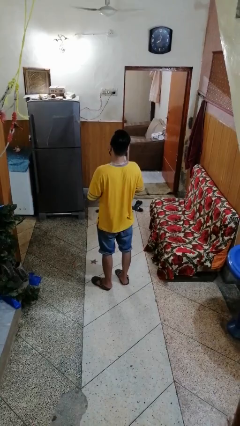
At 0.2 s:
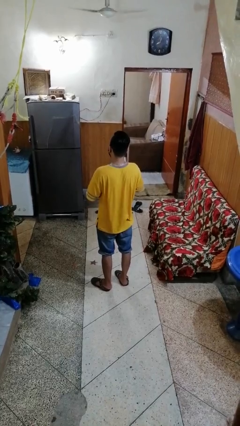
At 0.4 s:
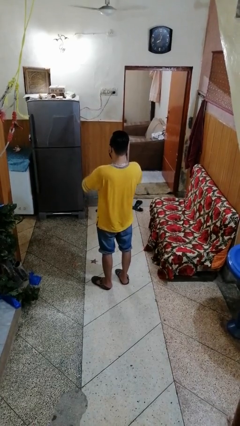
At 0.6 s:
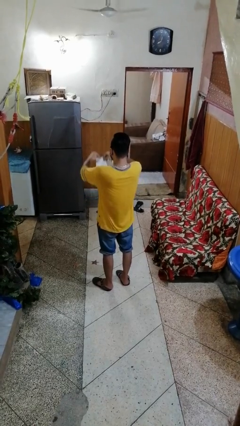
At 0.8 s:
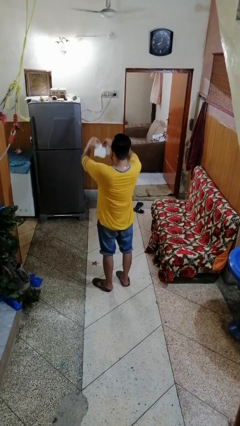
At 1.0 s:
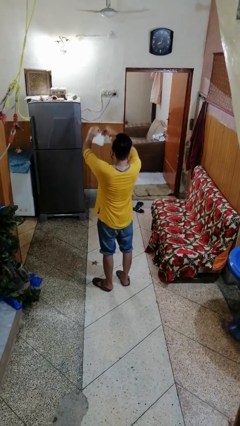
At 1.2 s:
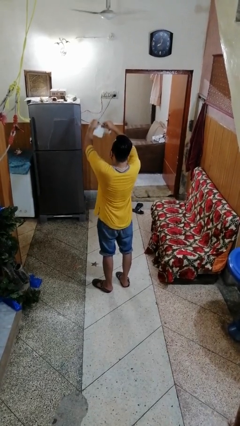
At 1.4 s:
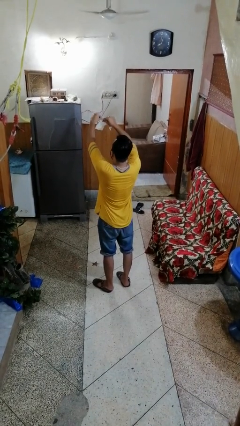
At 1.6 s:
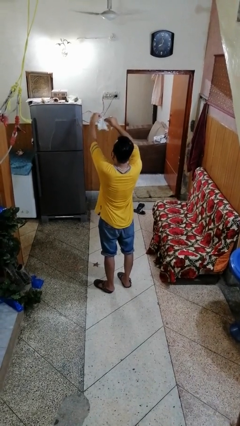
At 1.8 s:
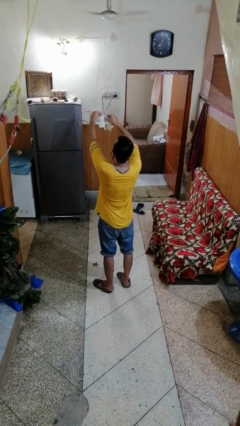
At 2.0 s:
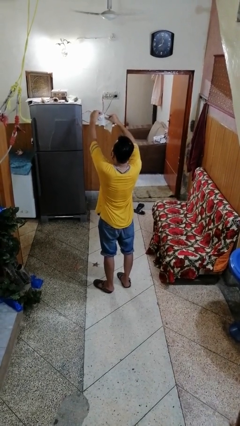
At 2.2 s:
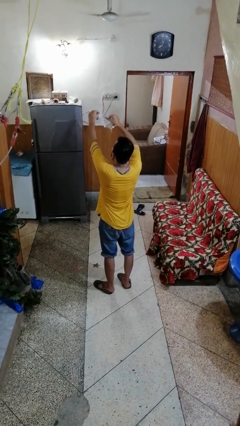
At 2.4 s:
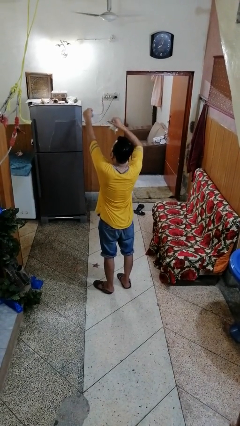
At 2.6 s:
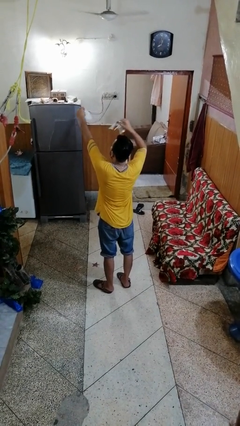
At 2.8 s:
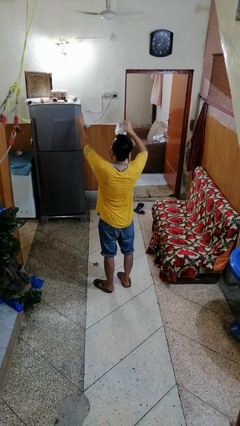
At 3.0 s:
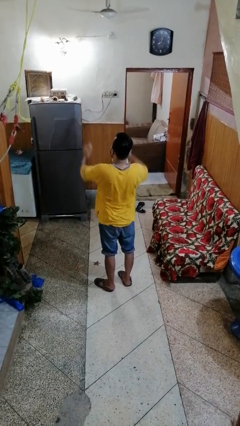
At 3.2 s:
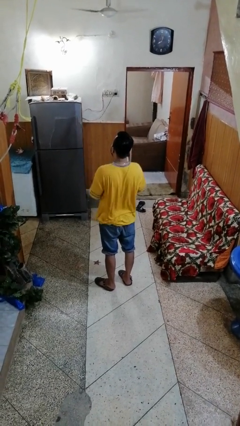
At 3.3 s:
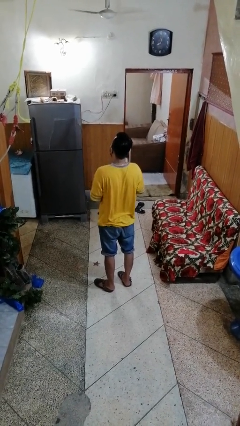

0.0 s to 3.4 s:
person tears paper

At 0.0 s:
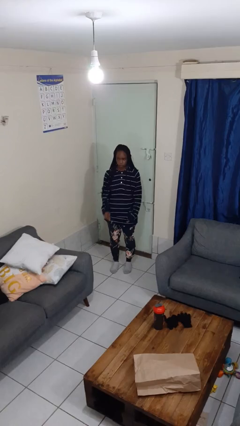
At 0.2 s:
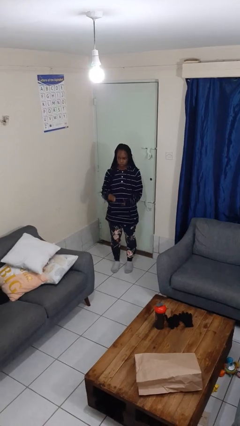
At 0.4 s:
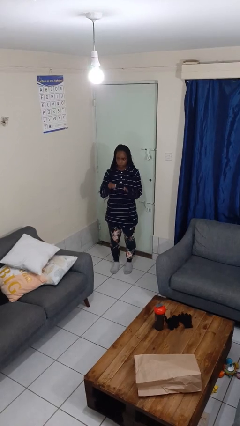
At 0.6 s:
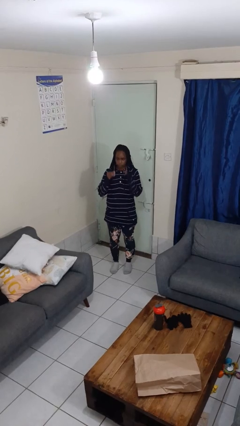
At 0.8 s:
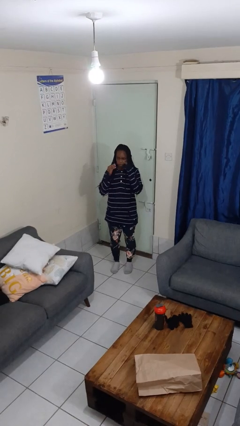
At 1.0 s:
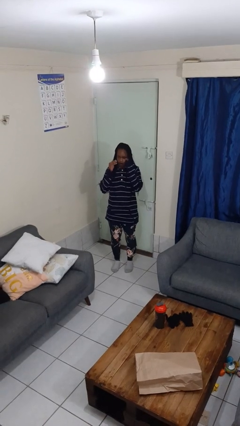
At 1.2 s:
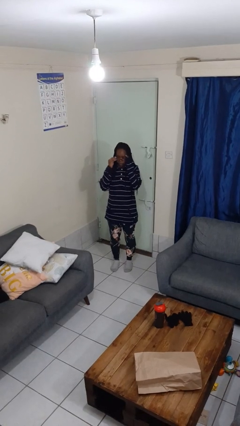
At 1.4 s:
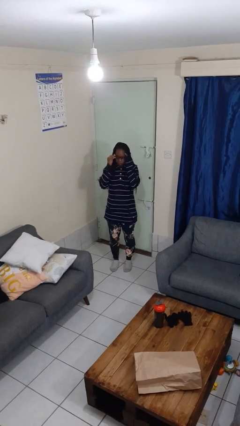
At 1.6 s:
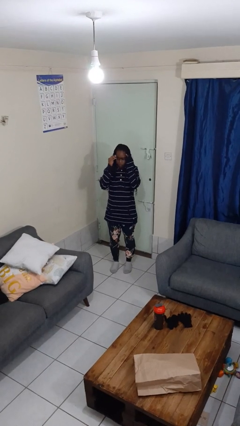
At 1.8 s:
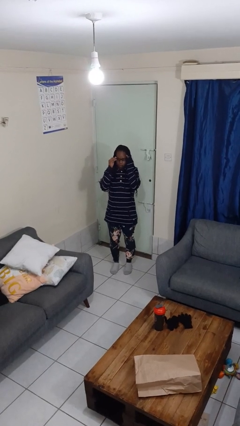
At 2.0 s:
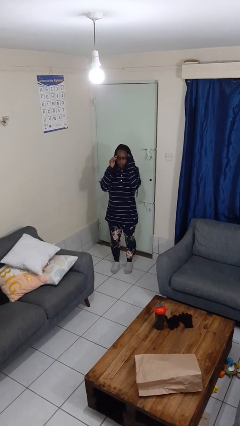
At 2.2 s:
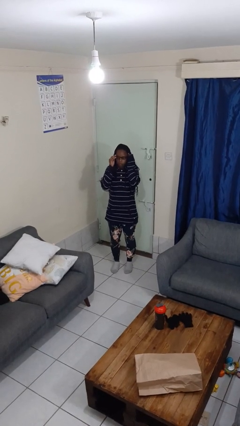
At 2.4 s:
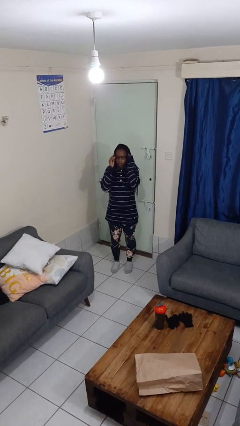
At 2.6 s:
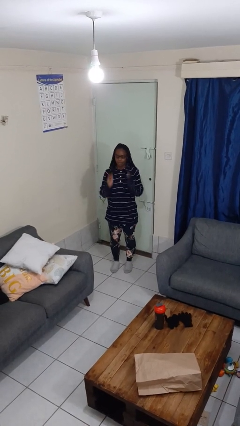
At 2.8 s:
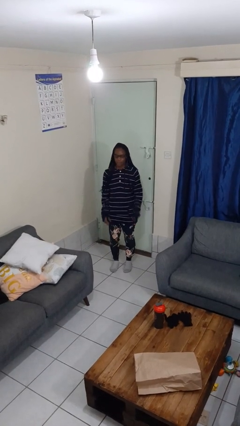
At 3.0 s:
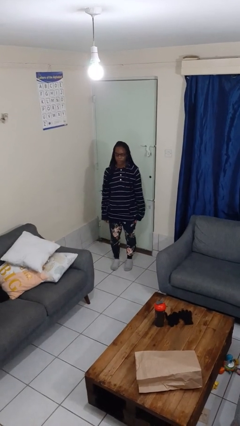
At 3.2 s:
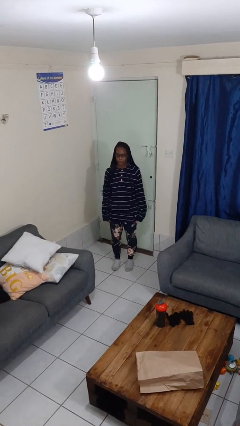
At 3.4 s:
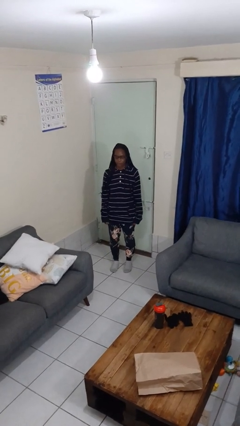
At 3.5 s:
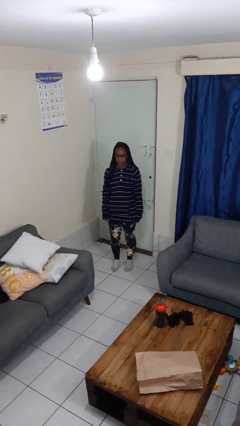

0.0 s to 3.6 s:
person puts on glasses

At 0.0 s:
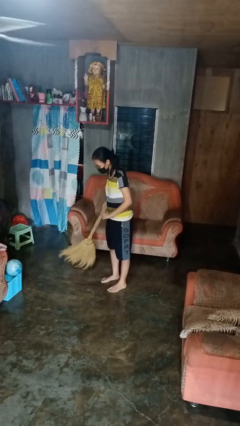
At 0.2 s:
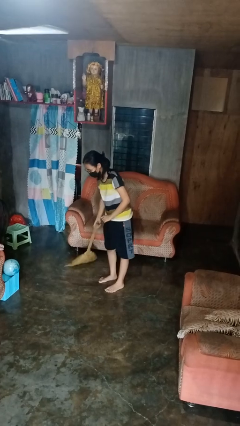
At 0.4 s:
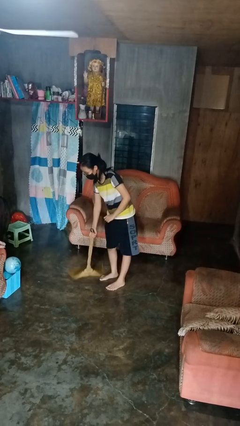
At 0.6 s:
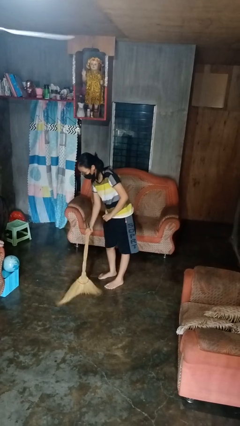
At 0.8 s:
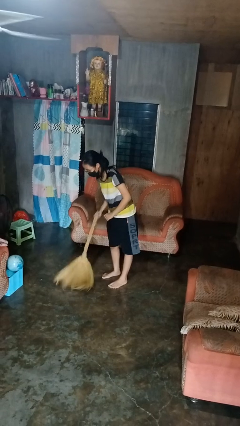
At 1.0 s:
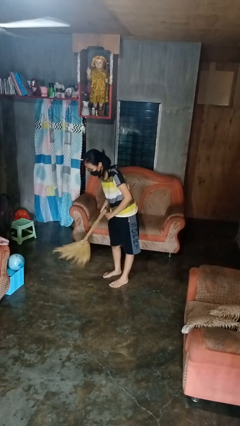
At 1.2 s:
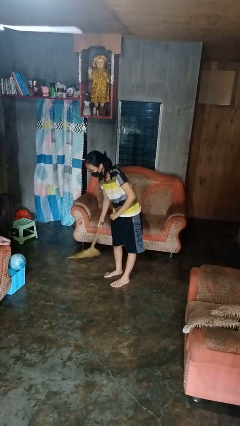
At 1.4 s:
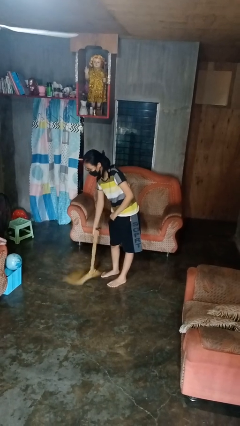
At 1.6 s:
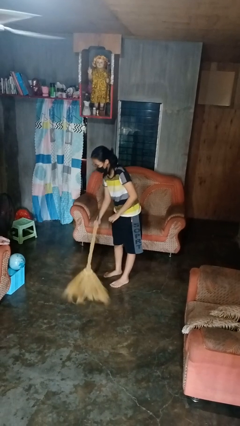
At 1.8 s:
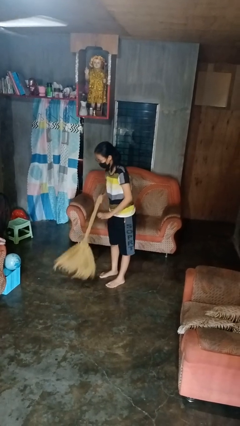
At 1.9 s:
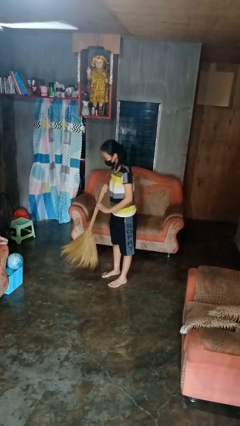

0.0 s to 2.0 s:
person sweeps floor

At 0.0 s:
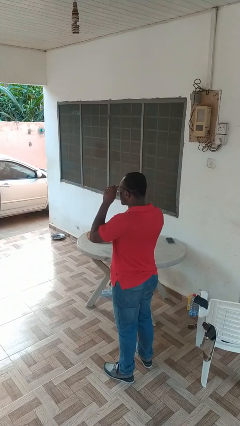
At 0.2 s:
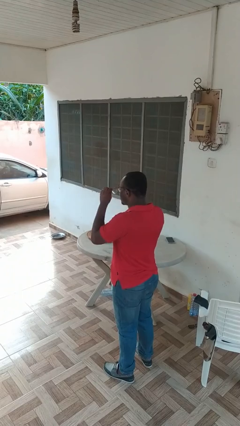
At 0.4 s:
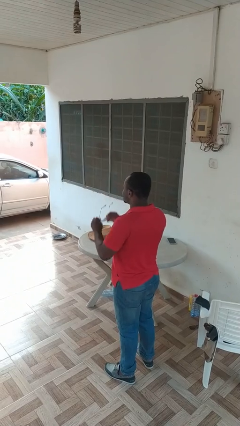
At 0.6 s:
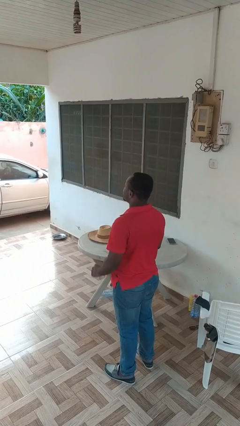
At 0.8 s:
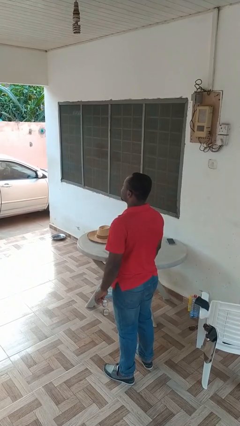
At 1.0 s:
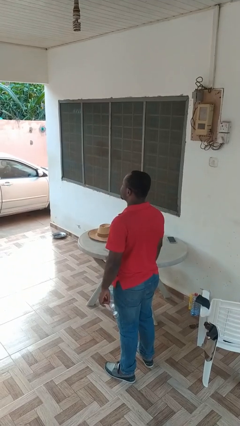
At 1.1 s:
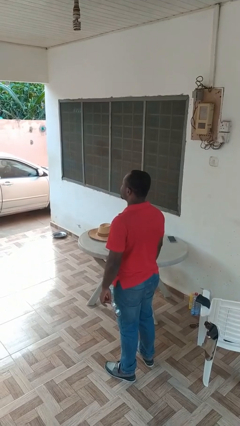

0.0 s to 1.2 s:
person takes off glasses

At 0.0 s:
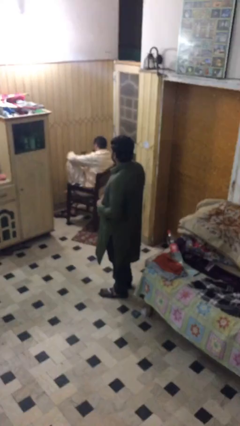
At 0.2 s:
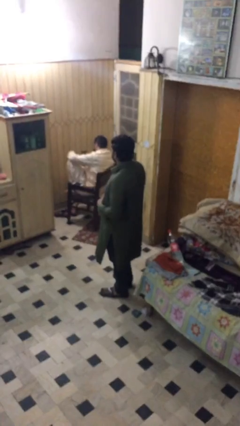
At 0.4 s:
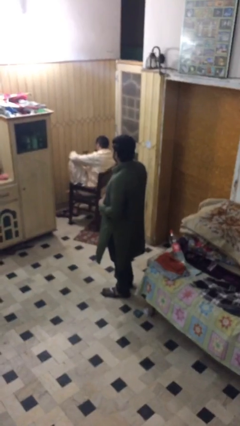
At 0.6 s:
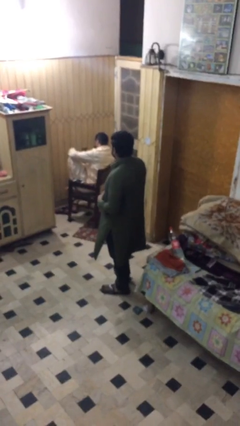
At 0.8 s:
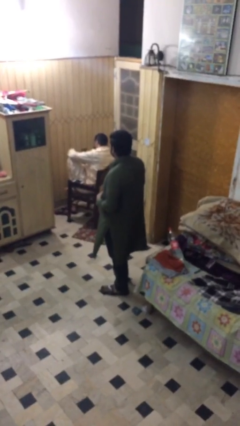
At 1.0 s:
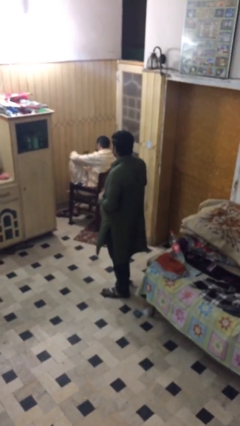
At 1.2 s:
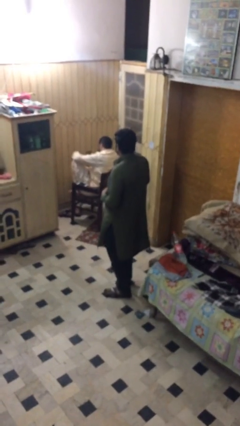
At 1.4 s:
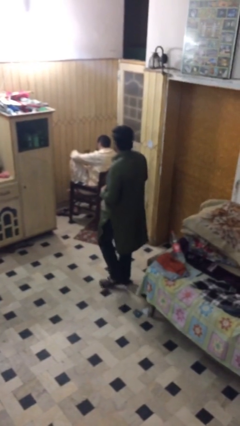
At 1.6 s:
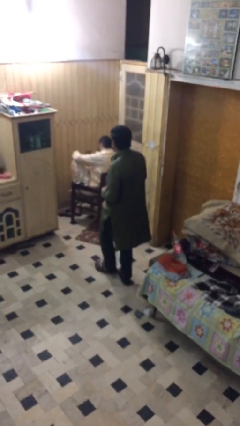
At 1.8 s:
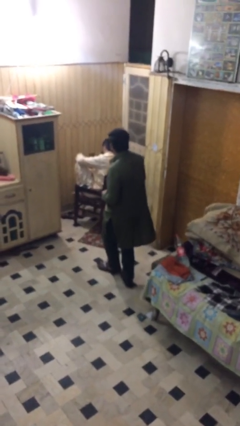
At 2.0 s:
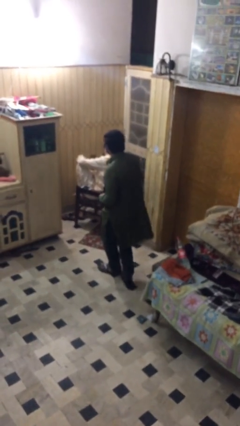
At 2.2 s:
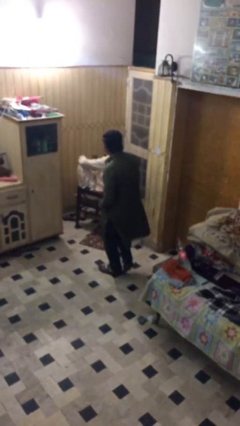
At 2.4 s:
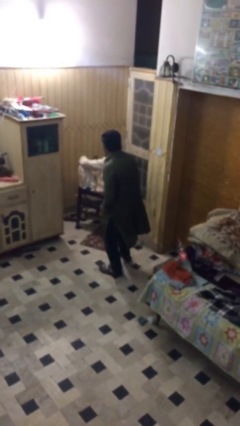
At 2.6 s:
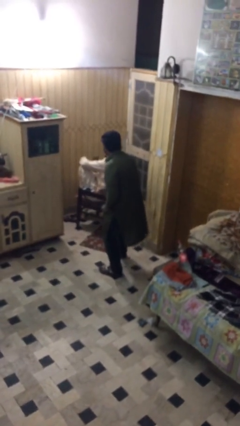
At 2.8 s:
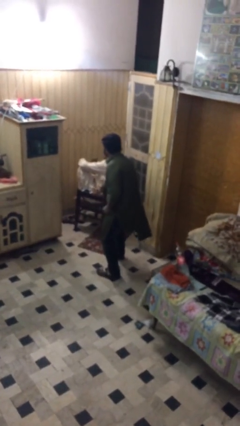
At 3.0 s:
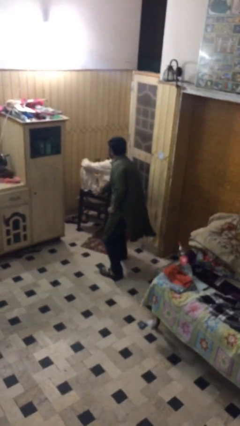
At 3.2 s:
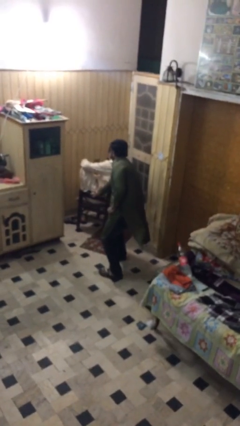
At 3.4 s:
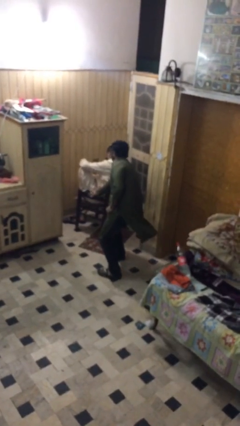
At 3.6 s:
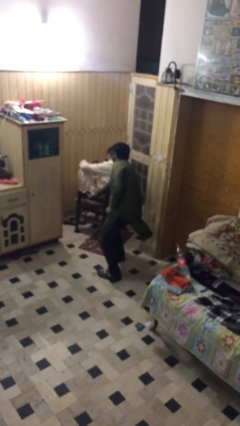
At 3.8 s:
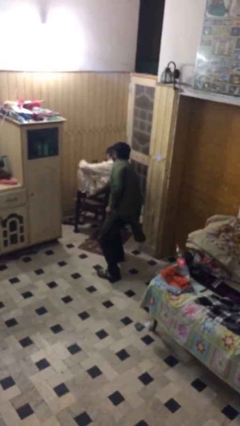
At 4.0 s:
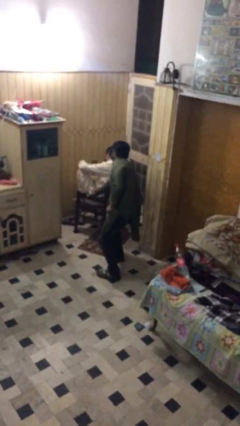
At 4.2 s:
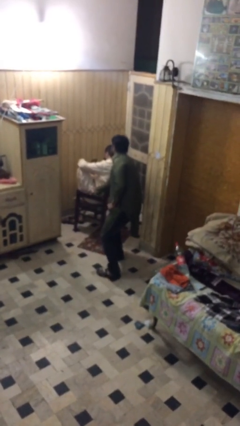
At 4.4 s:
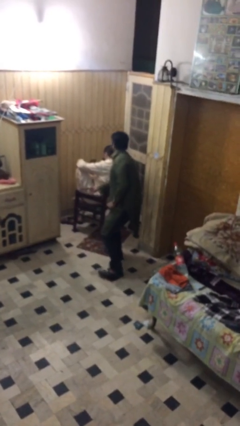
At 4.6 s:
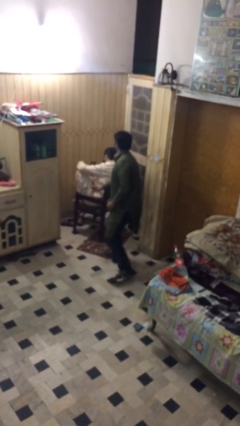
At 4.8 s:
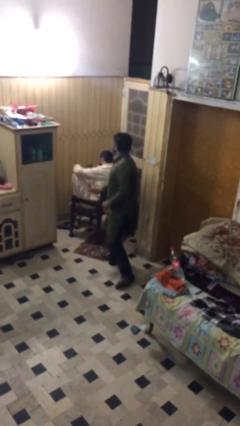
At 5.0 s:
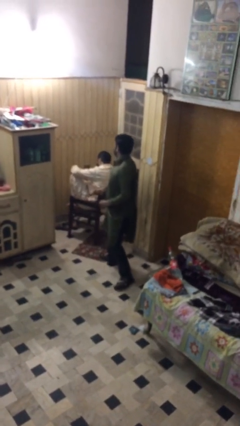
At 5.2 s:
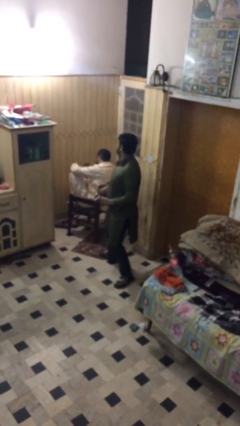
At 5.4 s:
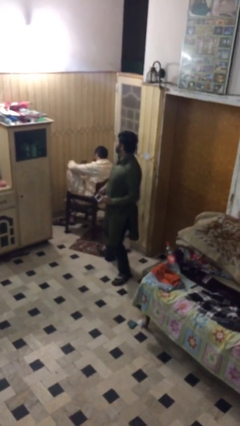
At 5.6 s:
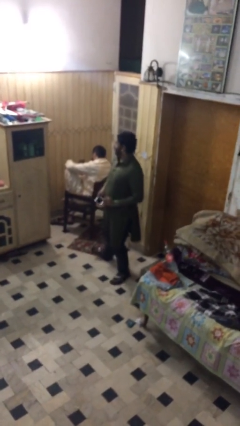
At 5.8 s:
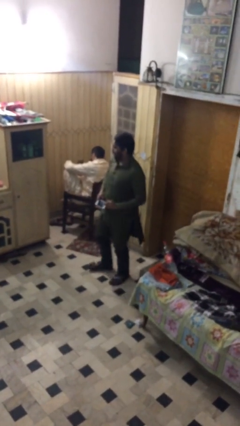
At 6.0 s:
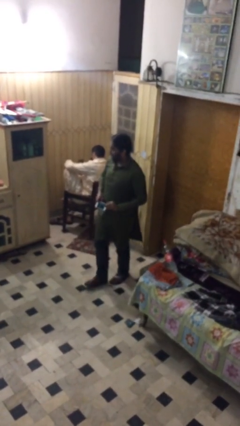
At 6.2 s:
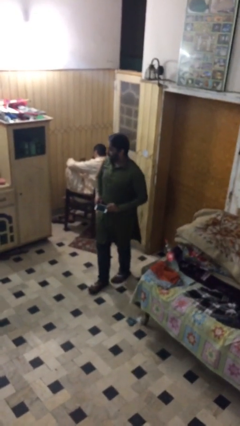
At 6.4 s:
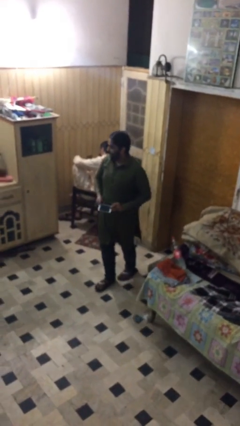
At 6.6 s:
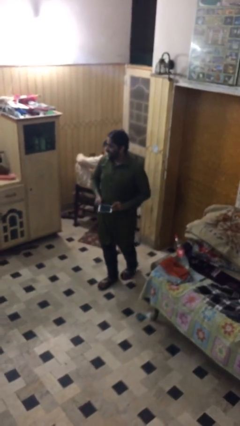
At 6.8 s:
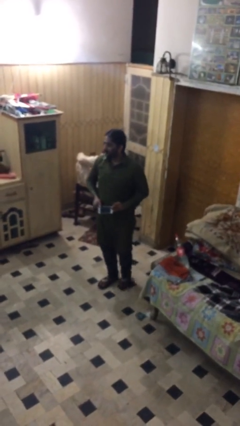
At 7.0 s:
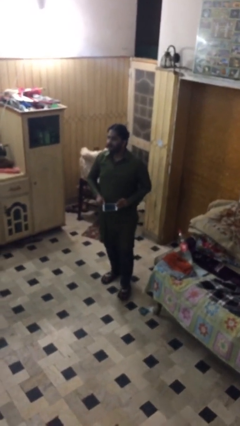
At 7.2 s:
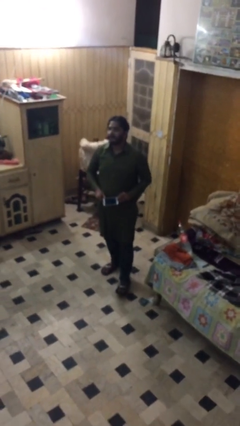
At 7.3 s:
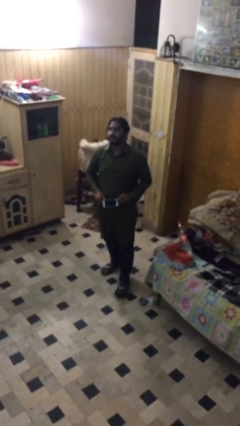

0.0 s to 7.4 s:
person steals object from person

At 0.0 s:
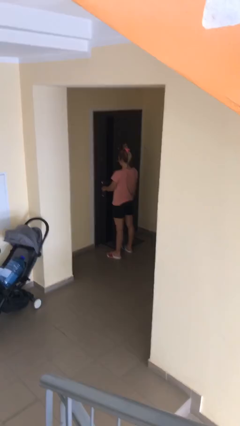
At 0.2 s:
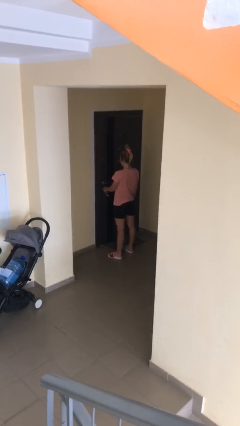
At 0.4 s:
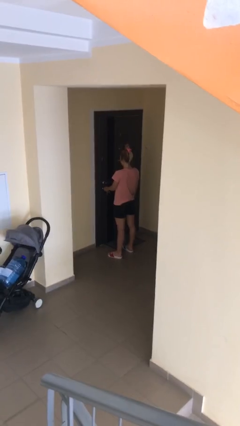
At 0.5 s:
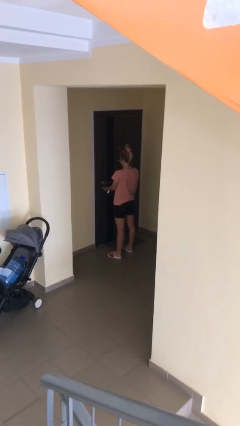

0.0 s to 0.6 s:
person locks door with keys
